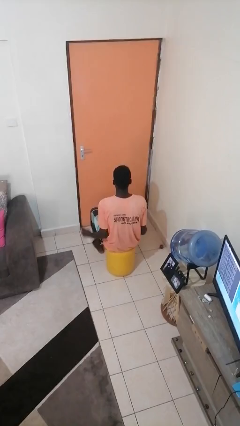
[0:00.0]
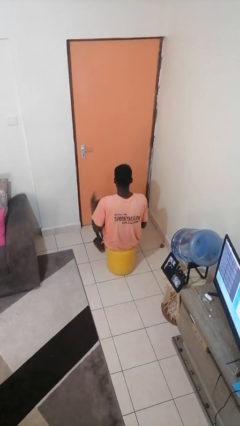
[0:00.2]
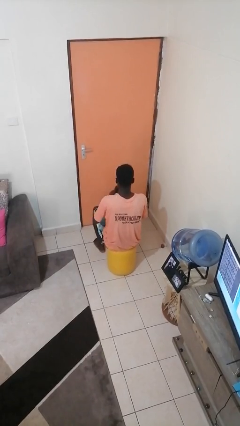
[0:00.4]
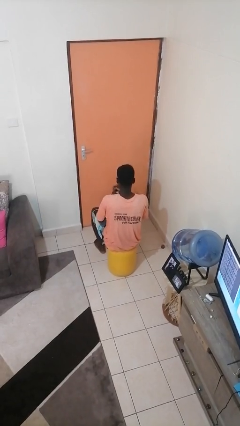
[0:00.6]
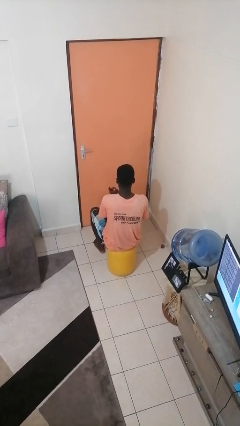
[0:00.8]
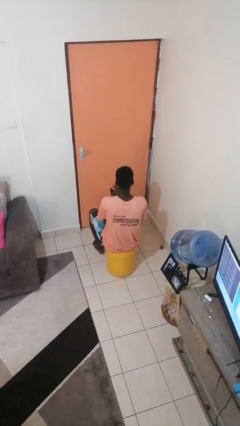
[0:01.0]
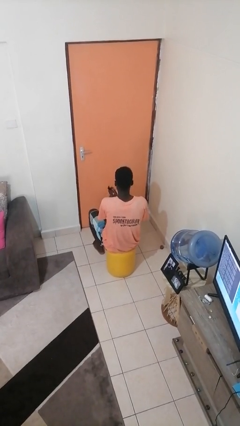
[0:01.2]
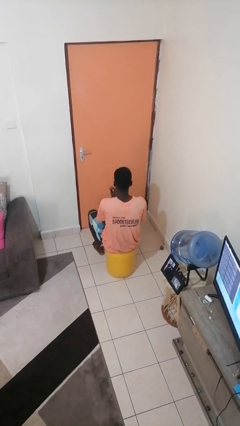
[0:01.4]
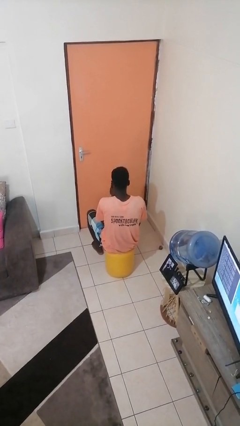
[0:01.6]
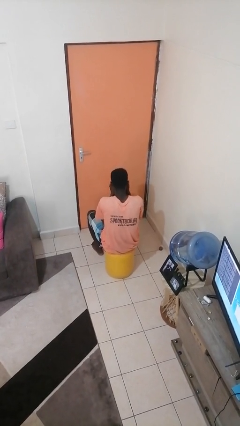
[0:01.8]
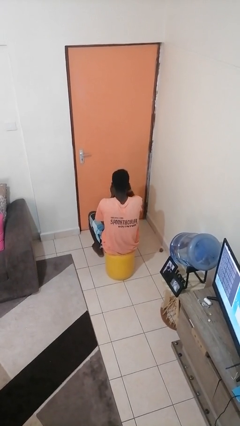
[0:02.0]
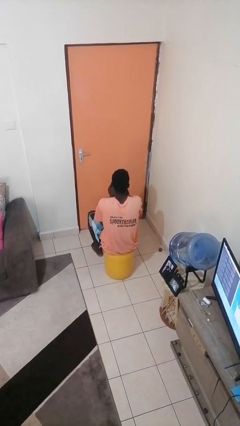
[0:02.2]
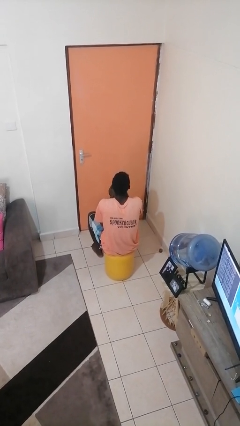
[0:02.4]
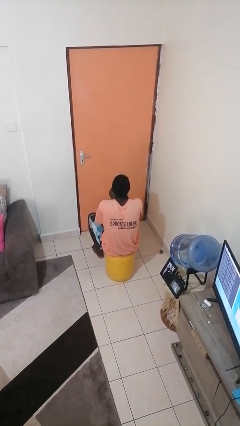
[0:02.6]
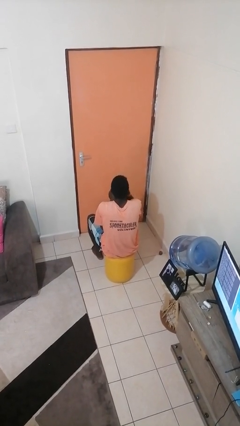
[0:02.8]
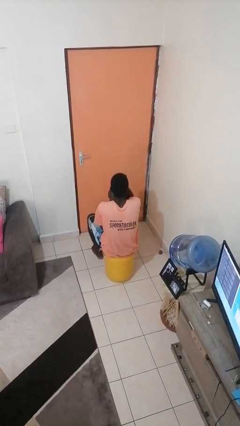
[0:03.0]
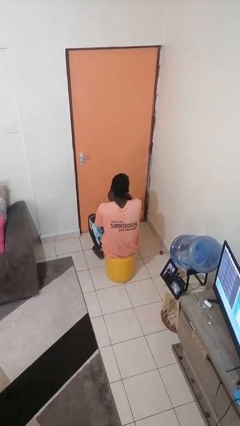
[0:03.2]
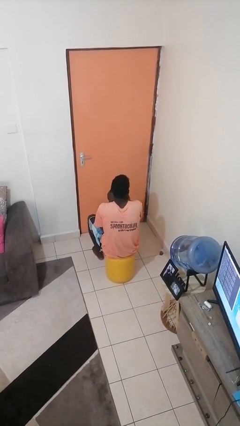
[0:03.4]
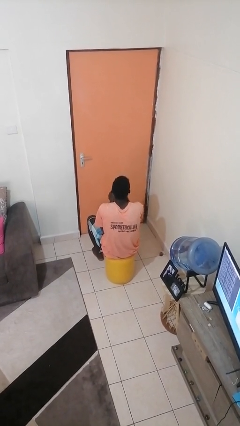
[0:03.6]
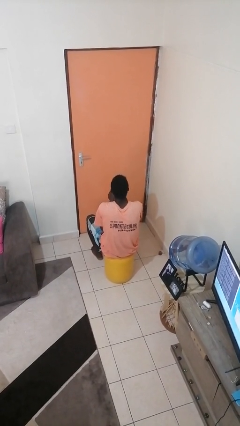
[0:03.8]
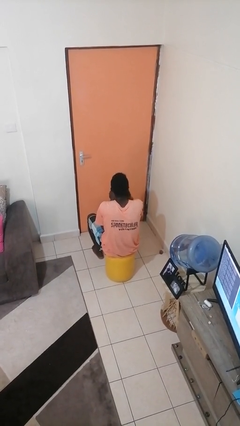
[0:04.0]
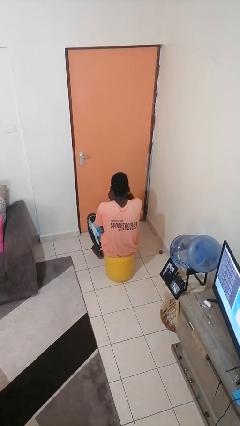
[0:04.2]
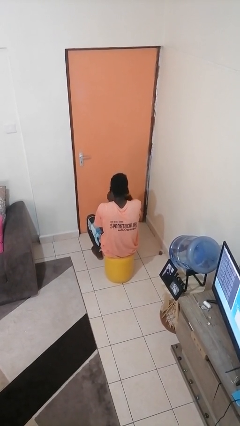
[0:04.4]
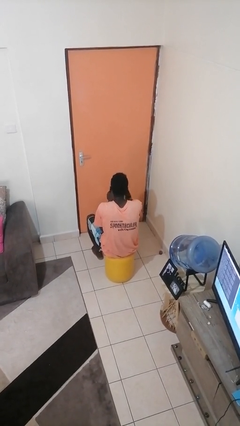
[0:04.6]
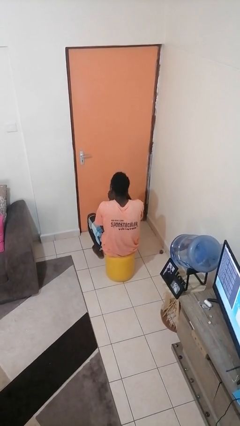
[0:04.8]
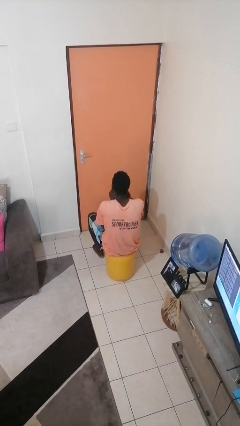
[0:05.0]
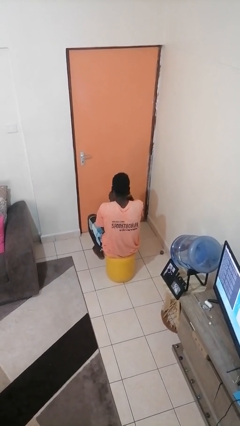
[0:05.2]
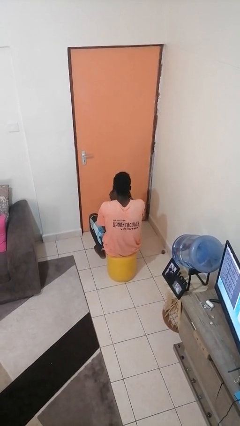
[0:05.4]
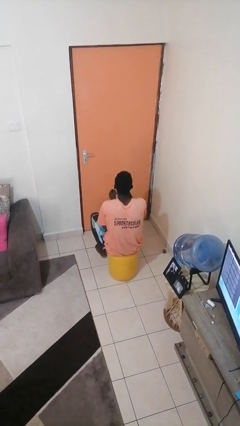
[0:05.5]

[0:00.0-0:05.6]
person applies sunscreen

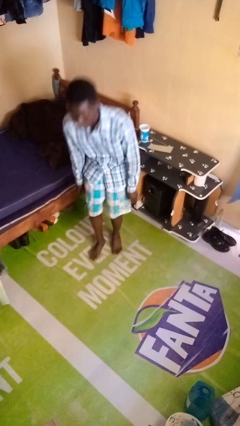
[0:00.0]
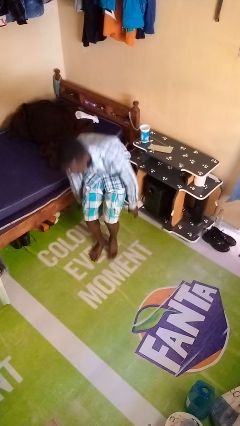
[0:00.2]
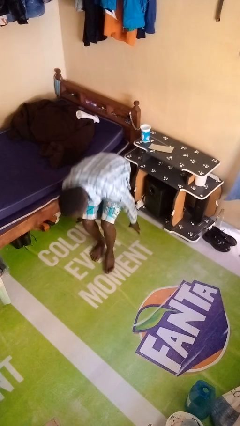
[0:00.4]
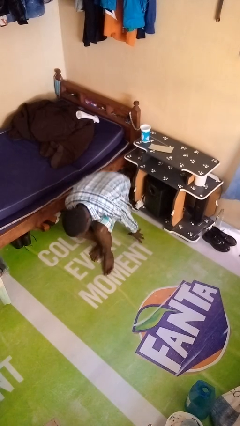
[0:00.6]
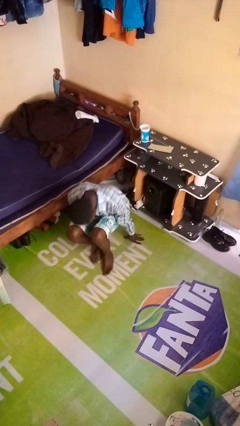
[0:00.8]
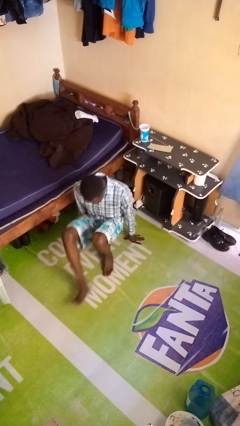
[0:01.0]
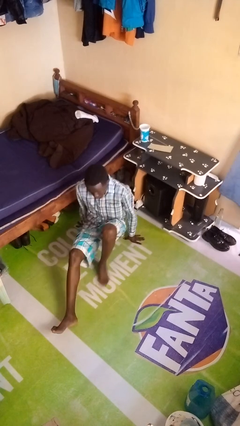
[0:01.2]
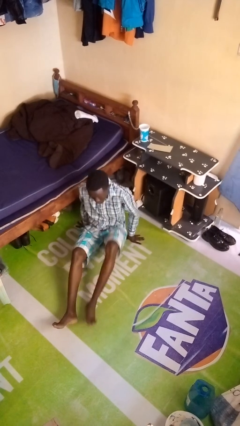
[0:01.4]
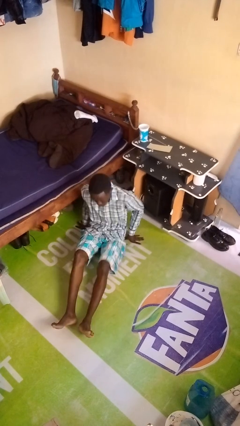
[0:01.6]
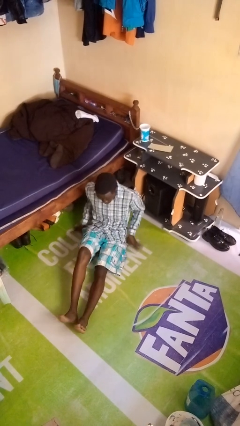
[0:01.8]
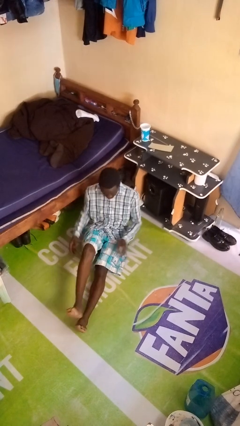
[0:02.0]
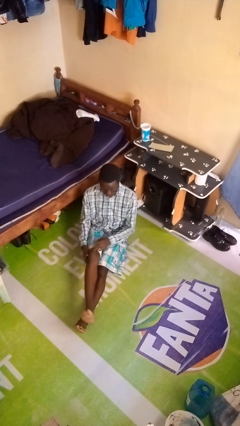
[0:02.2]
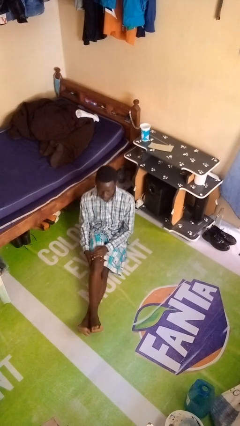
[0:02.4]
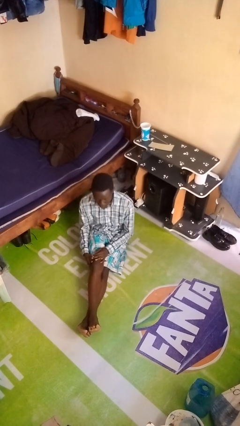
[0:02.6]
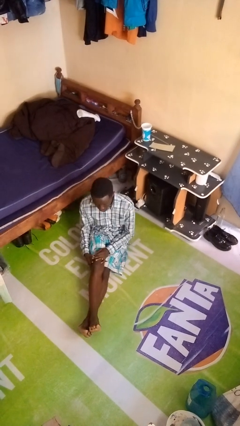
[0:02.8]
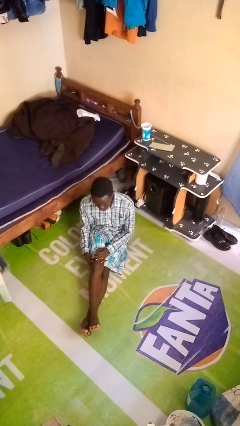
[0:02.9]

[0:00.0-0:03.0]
person sits crisscross

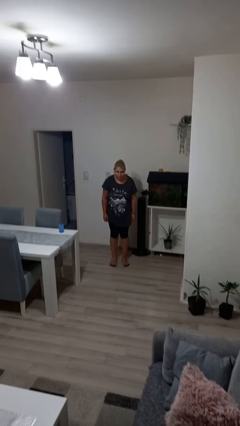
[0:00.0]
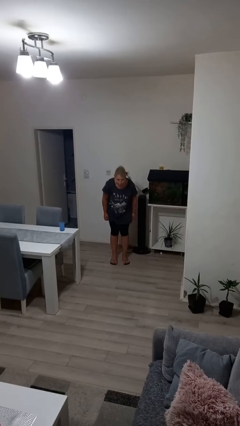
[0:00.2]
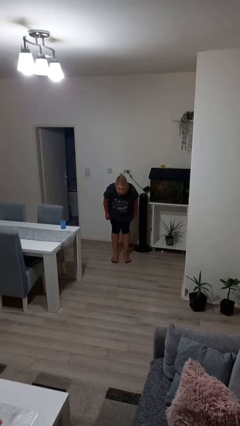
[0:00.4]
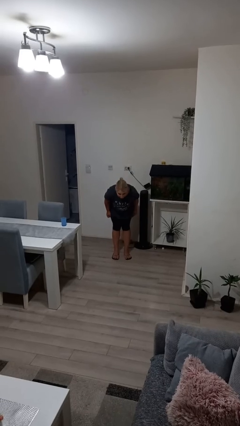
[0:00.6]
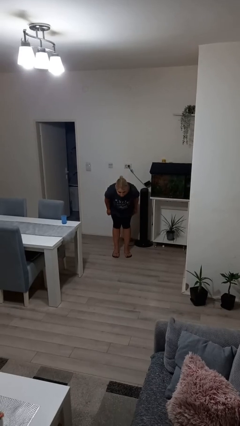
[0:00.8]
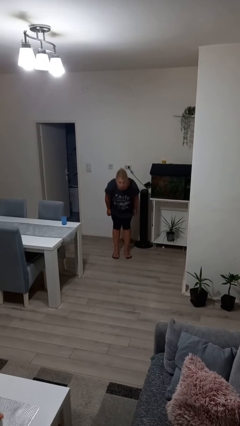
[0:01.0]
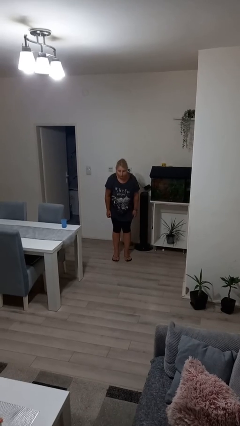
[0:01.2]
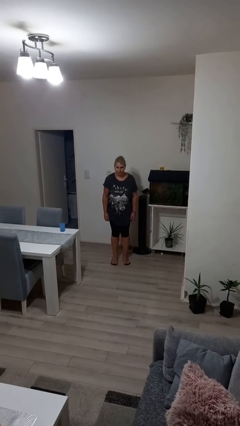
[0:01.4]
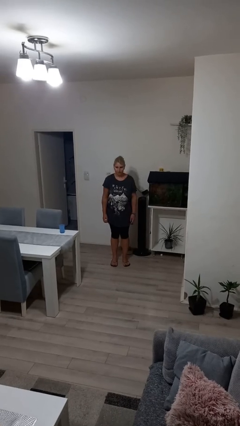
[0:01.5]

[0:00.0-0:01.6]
person bows

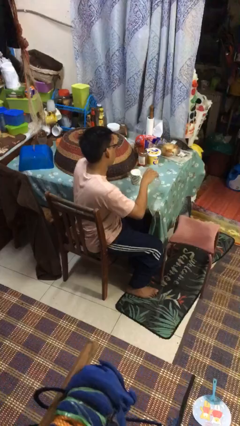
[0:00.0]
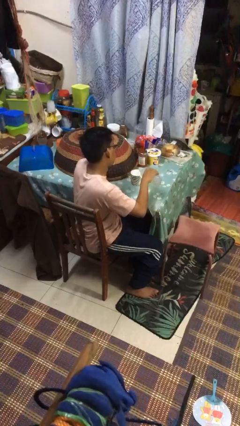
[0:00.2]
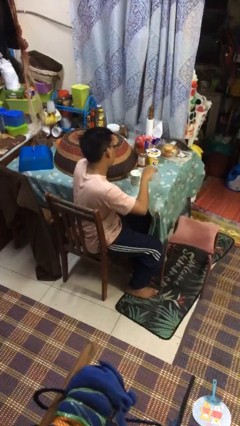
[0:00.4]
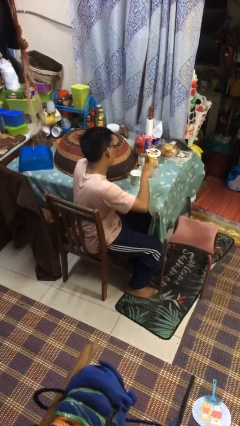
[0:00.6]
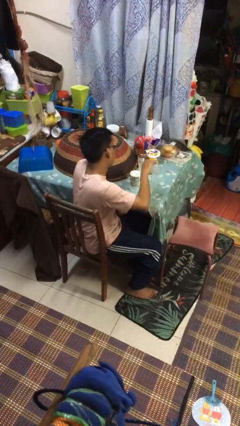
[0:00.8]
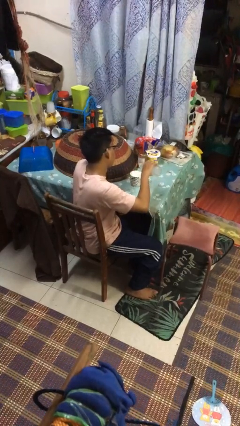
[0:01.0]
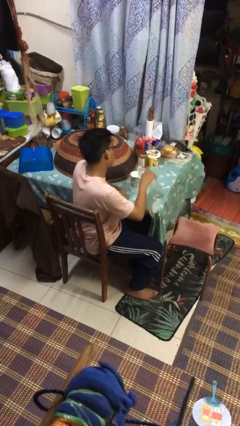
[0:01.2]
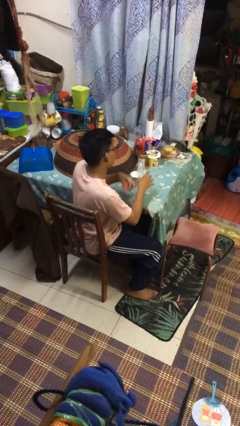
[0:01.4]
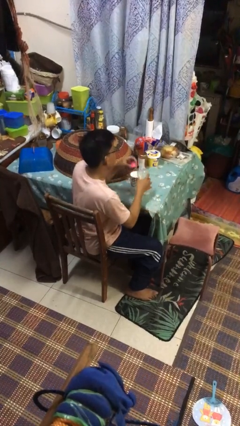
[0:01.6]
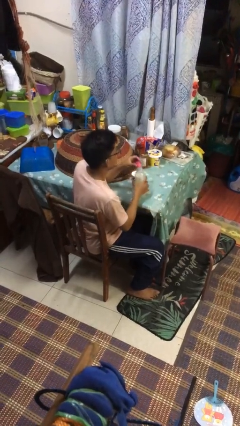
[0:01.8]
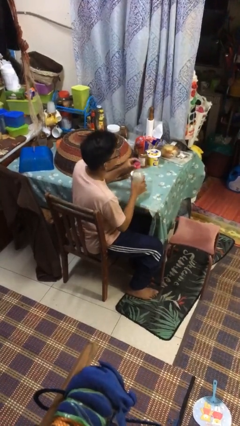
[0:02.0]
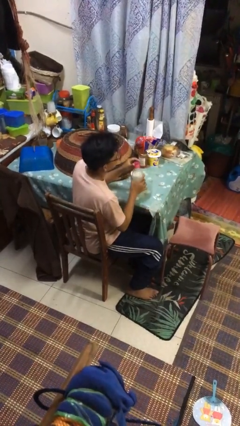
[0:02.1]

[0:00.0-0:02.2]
person pours liquid into cup

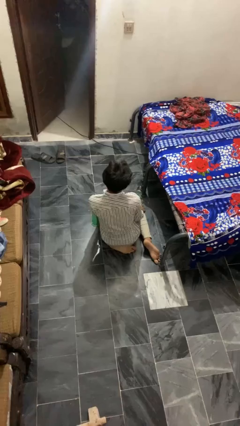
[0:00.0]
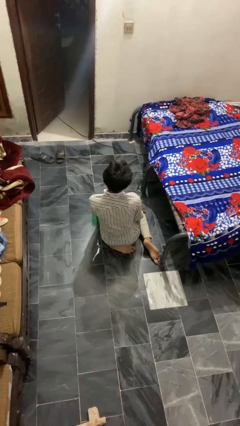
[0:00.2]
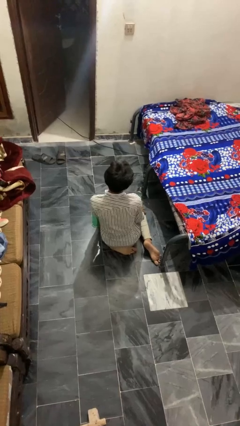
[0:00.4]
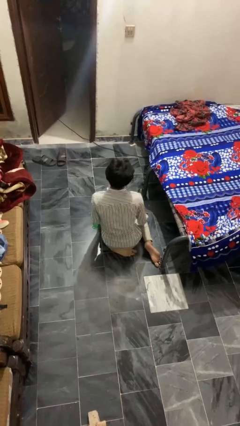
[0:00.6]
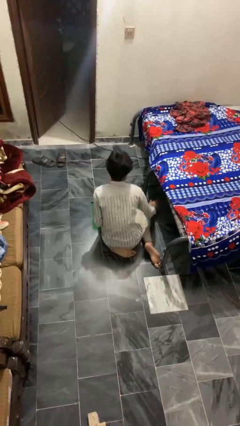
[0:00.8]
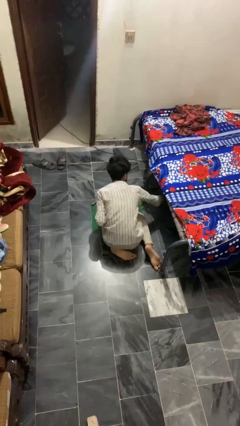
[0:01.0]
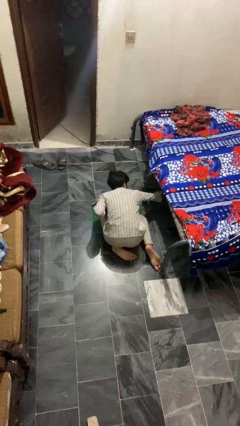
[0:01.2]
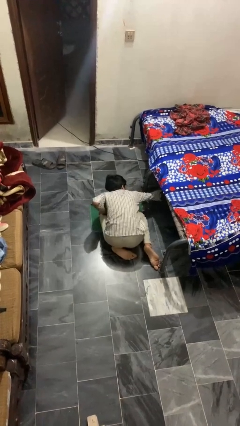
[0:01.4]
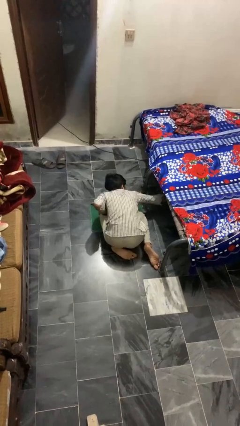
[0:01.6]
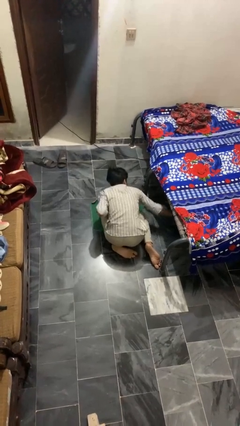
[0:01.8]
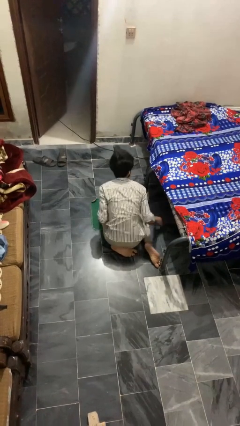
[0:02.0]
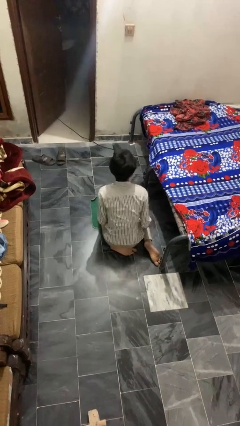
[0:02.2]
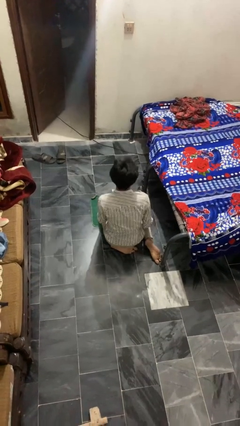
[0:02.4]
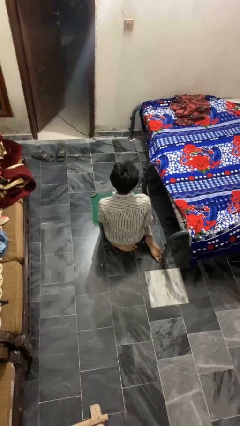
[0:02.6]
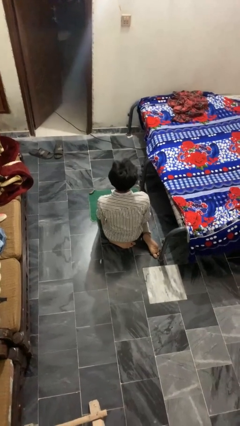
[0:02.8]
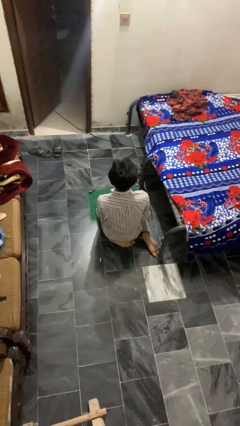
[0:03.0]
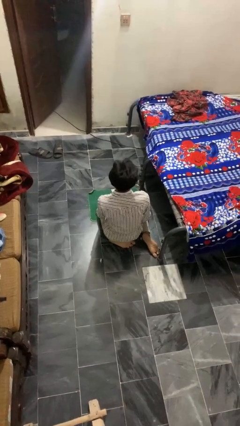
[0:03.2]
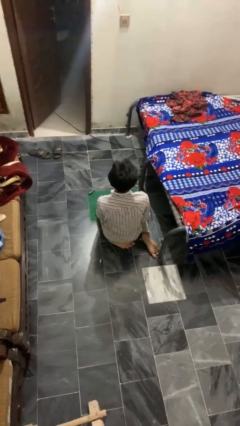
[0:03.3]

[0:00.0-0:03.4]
person searches under bed

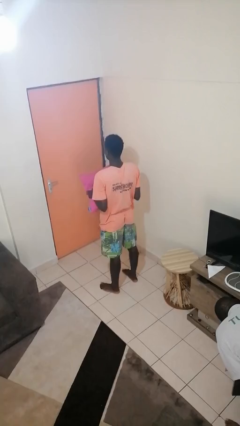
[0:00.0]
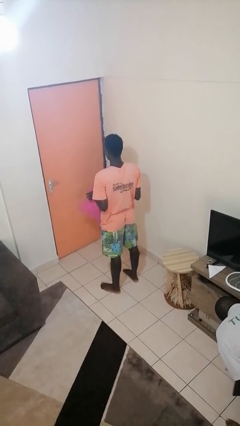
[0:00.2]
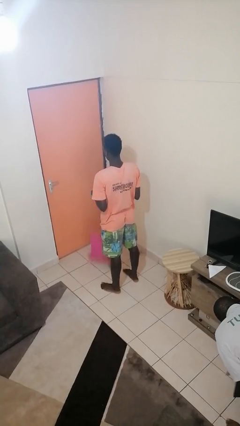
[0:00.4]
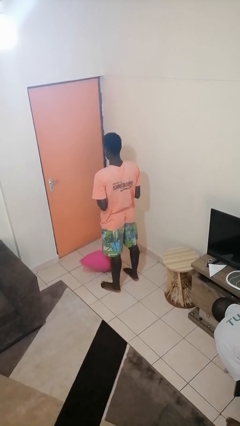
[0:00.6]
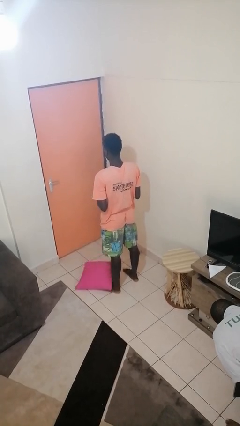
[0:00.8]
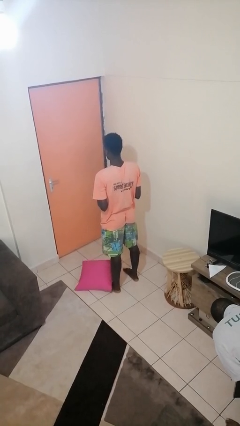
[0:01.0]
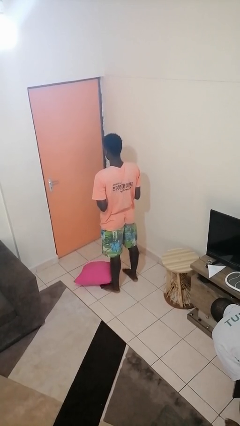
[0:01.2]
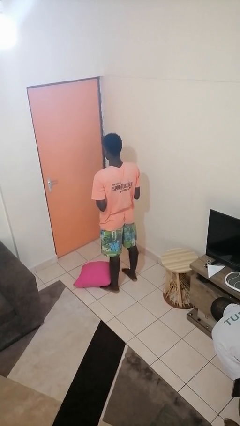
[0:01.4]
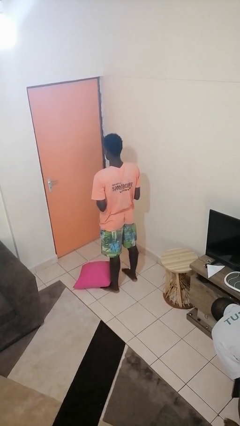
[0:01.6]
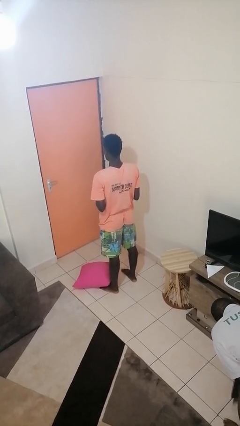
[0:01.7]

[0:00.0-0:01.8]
person drops object
